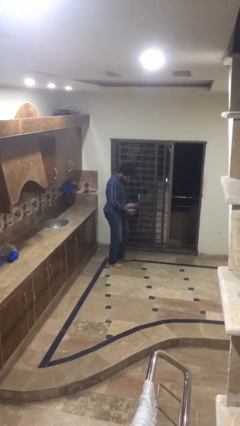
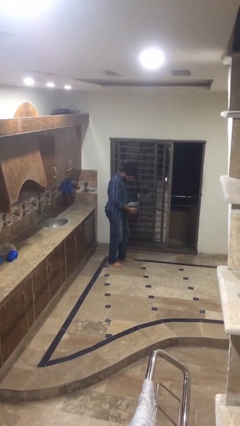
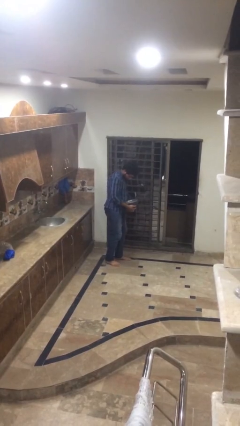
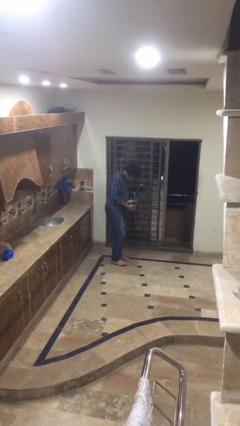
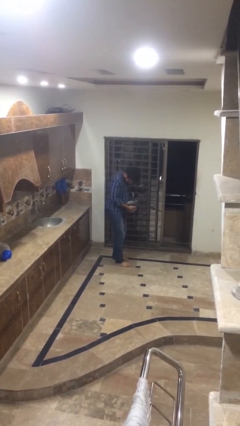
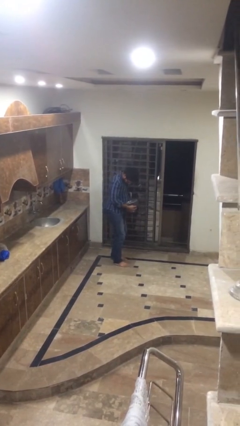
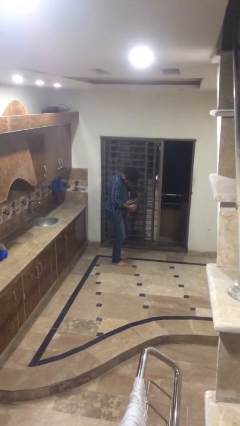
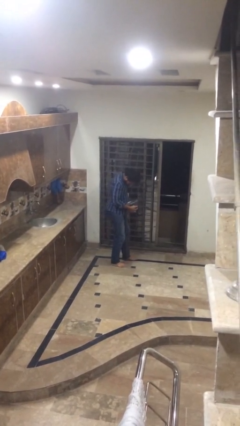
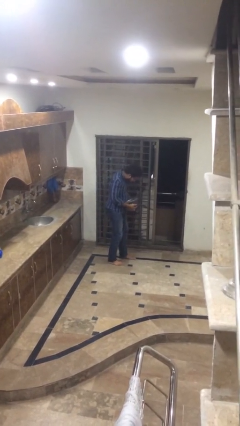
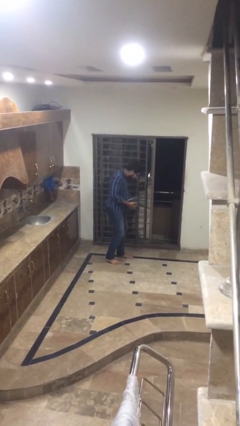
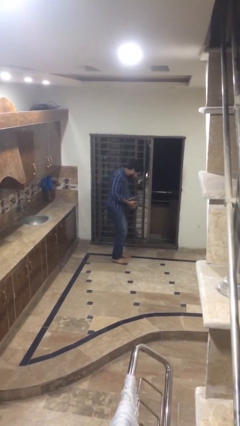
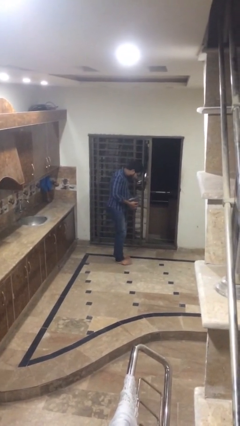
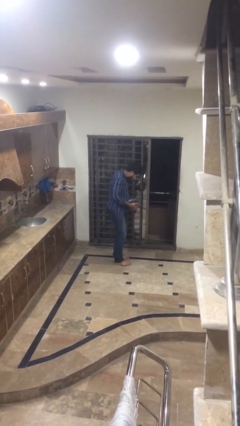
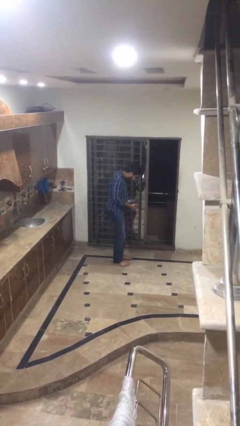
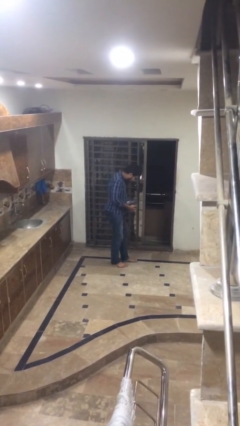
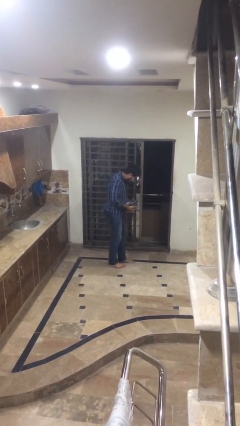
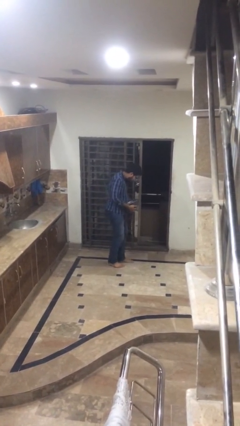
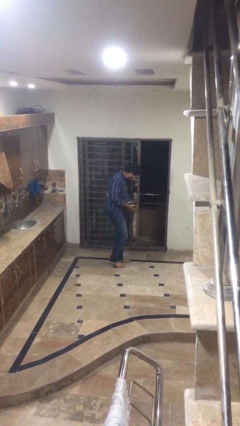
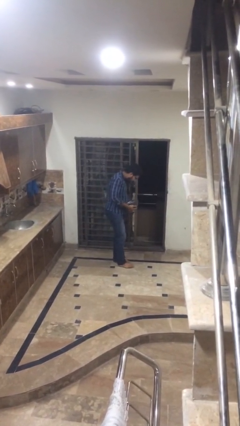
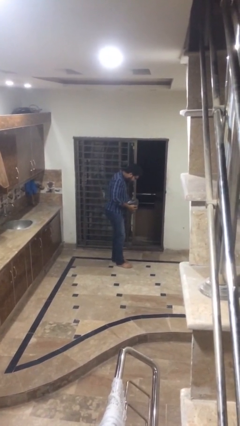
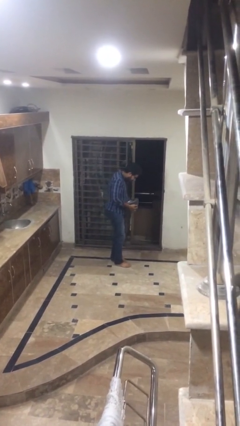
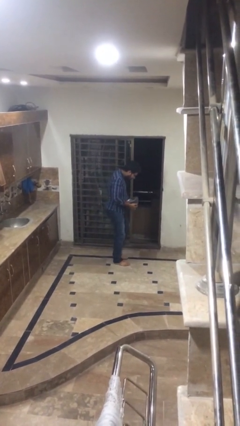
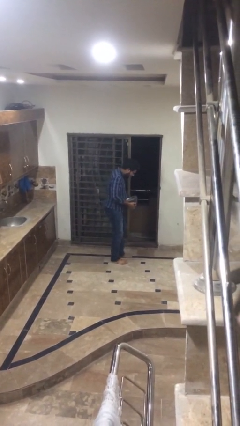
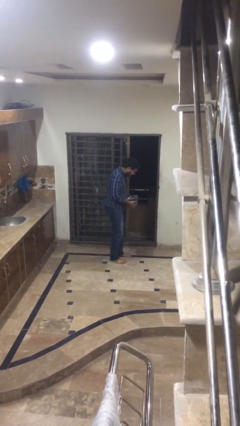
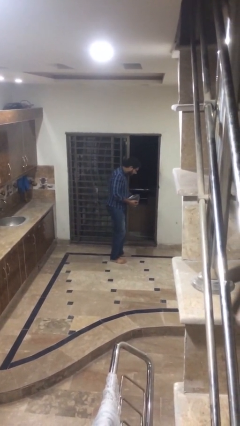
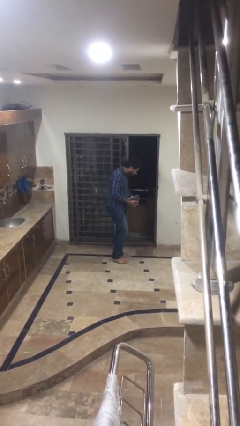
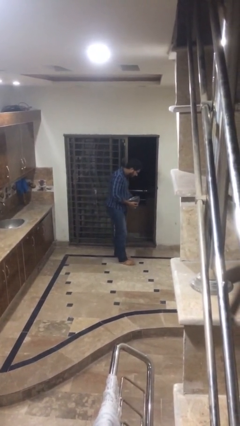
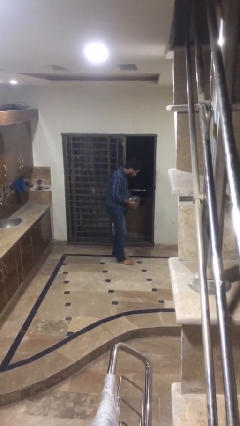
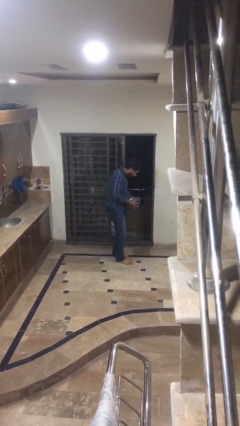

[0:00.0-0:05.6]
person carries heavy object

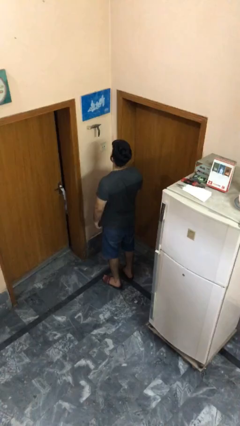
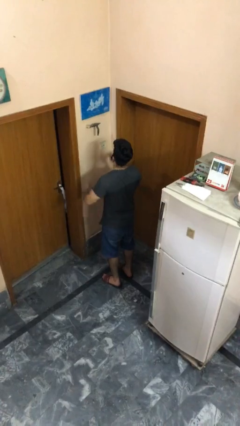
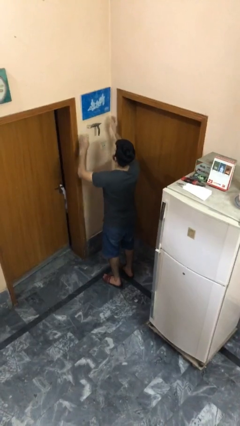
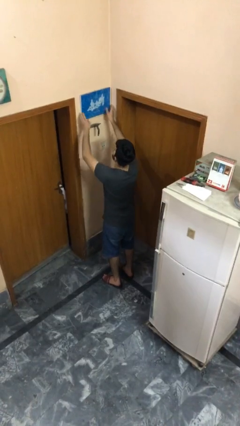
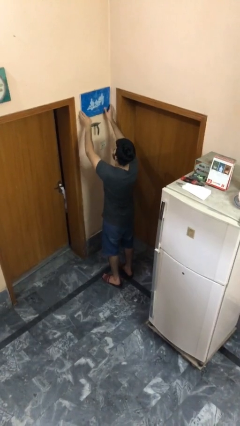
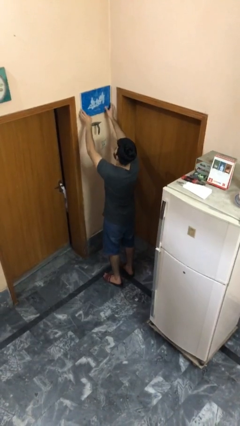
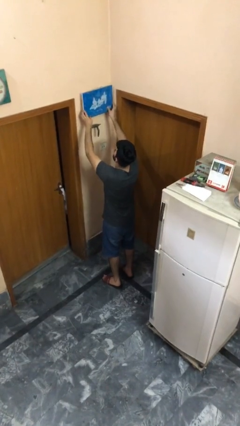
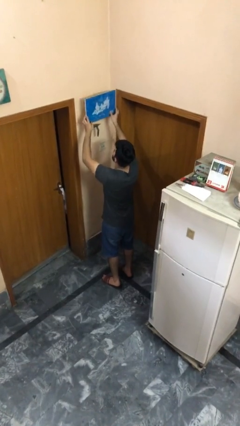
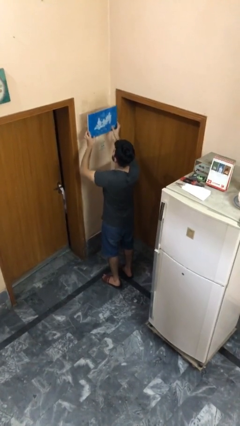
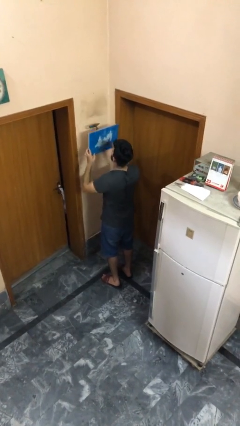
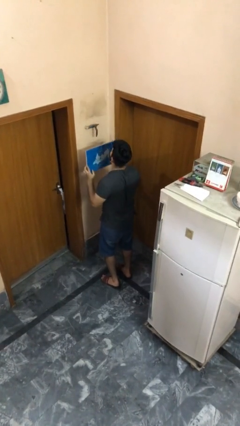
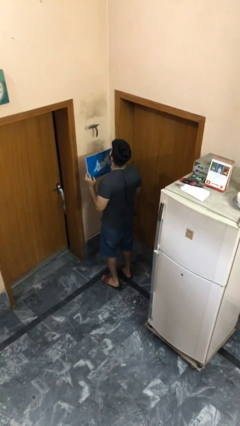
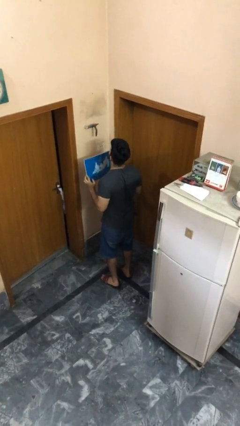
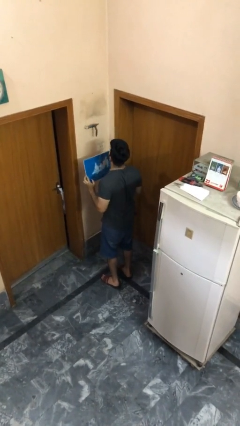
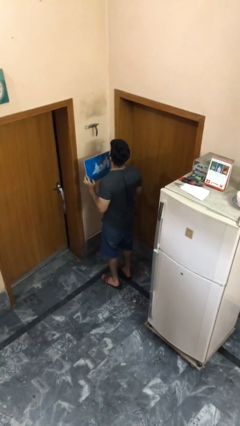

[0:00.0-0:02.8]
person takes down picture frame

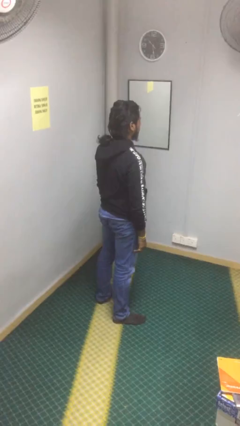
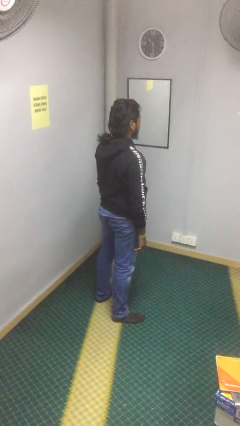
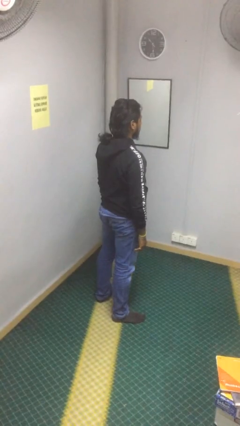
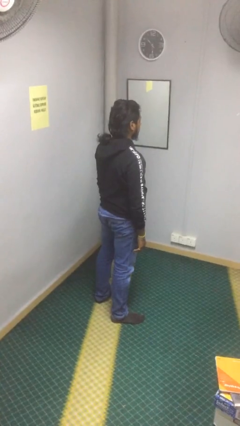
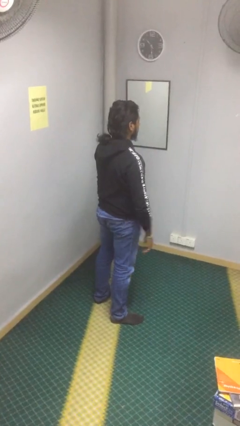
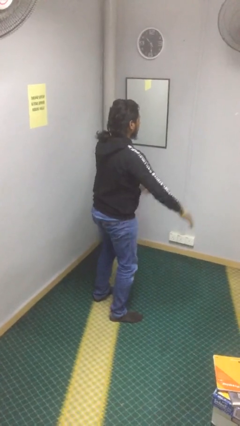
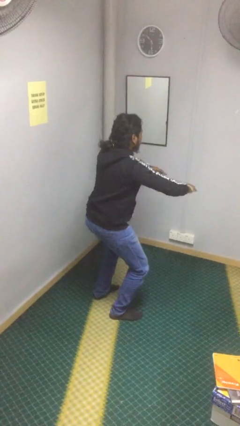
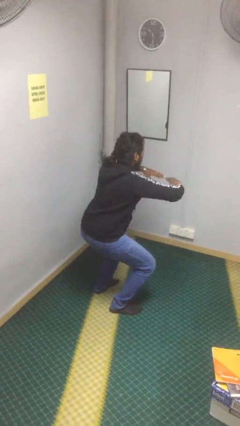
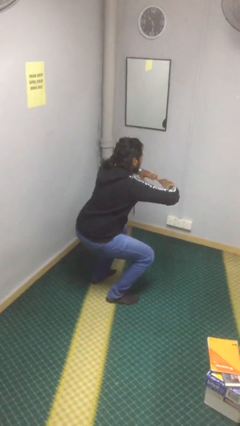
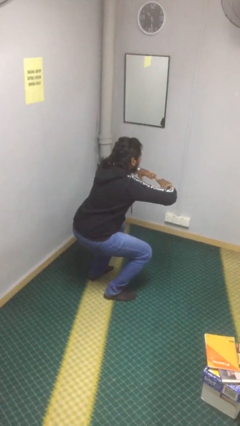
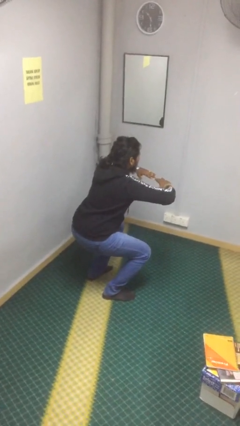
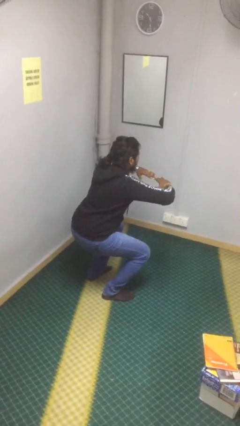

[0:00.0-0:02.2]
person squats

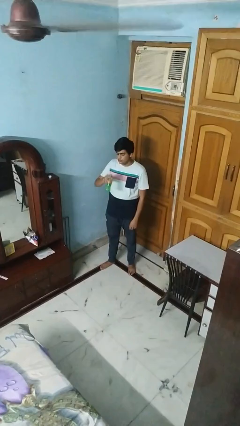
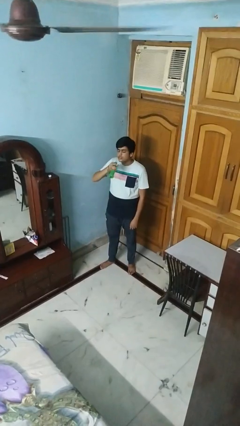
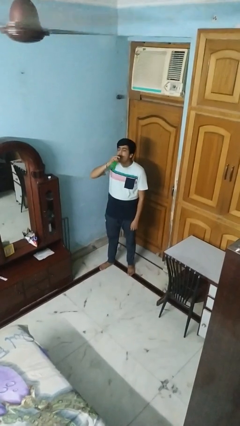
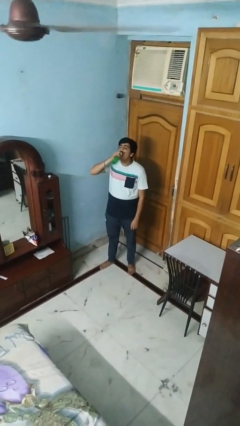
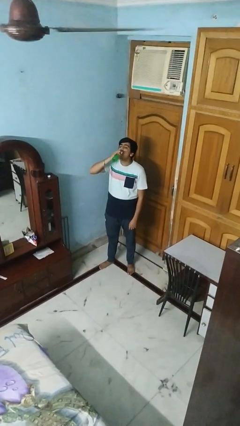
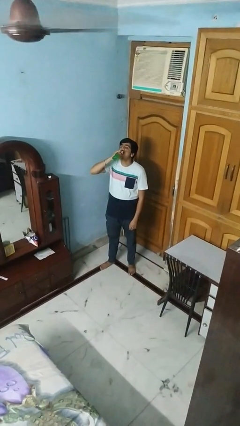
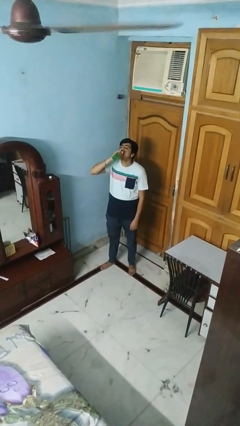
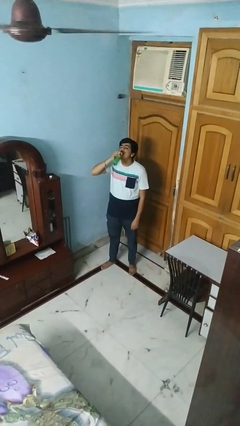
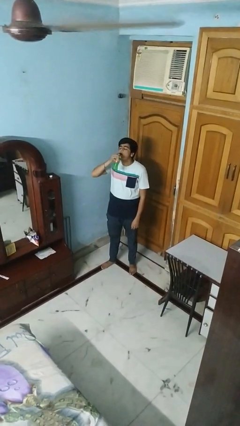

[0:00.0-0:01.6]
person drinks from bottle

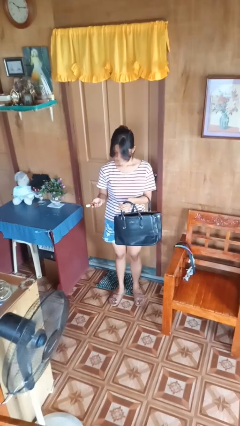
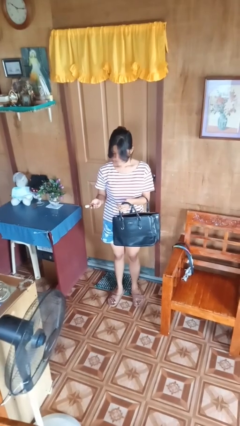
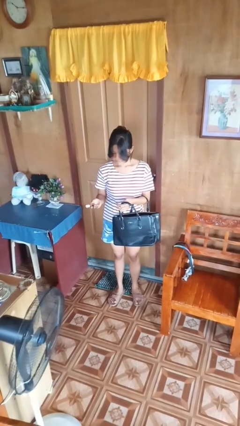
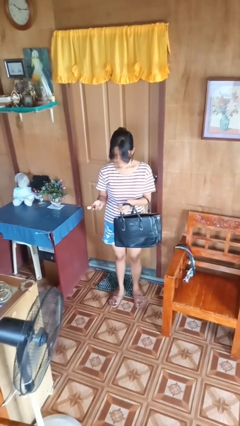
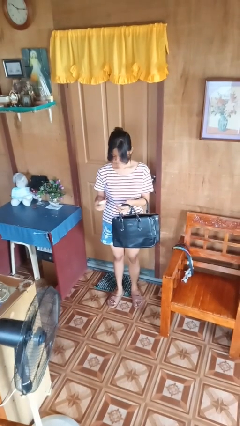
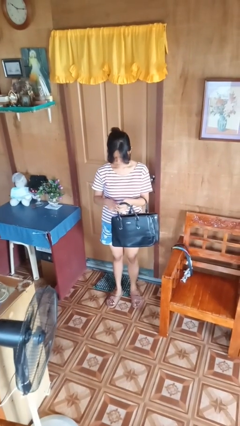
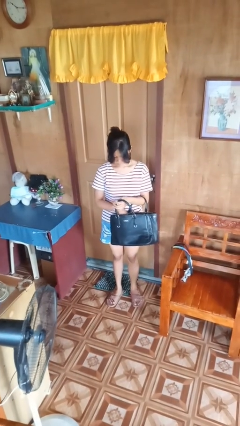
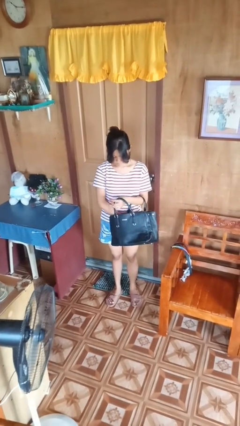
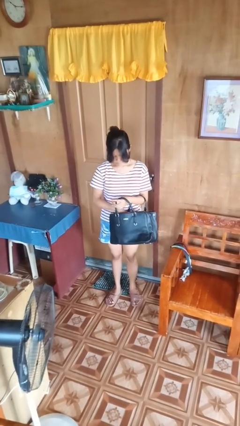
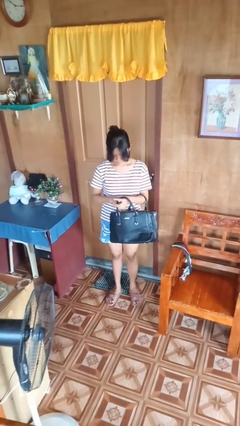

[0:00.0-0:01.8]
person puts object into purse

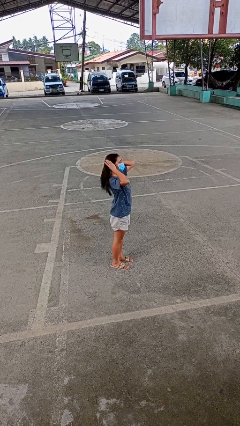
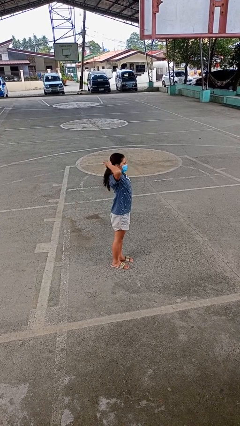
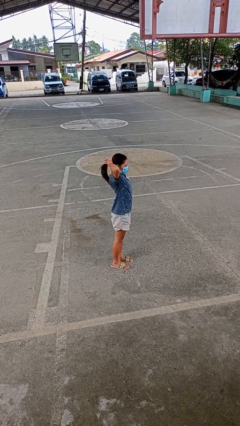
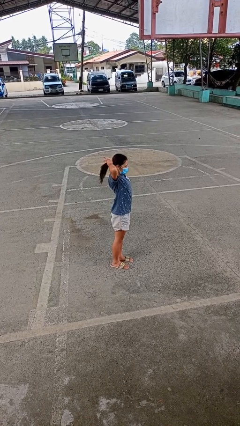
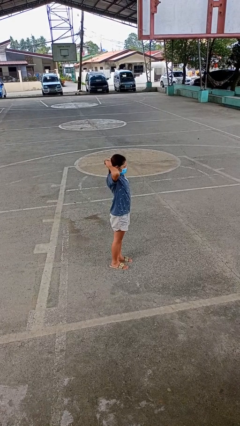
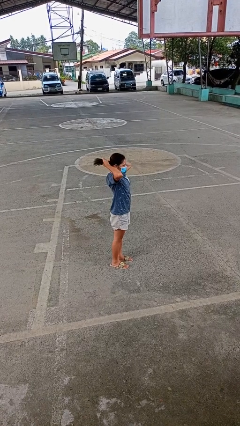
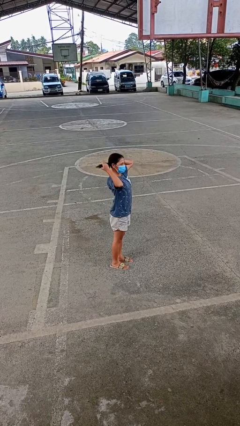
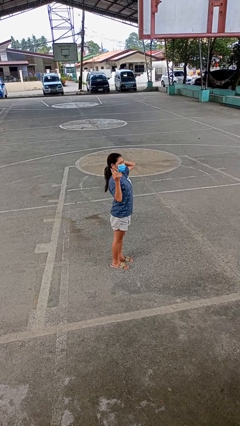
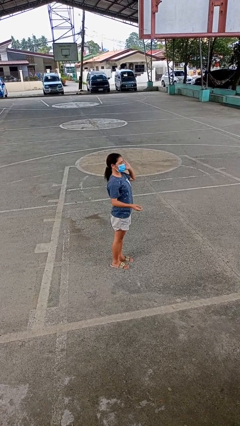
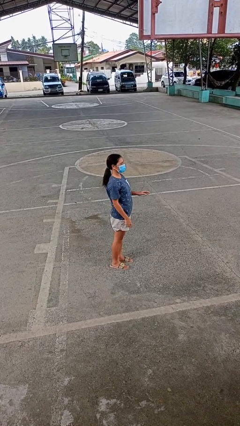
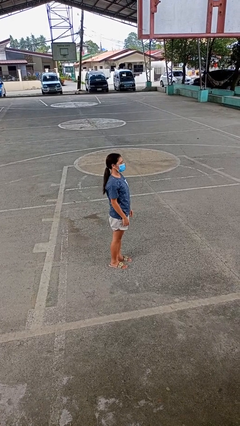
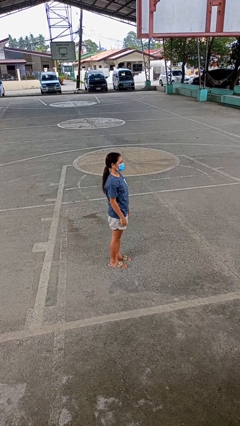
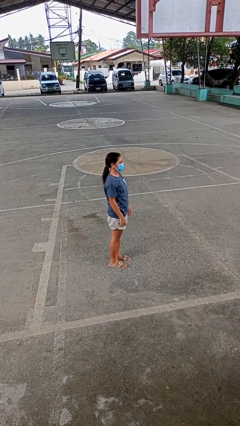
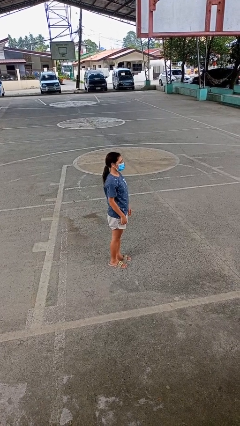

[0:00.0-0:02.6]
person puts hair in ponytail

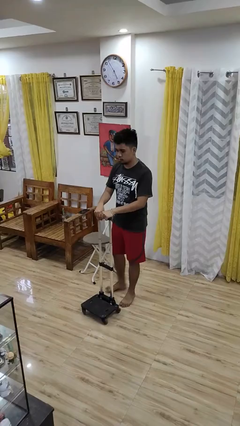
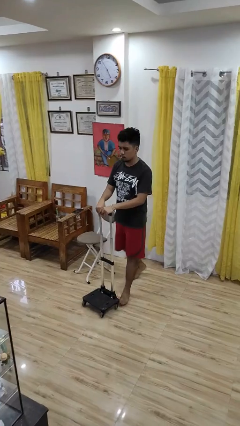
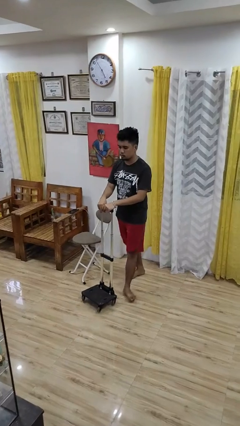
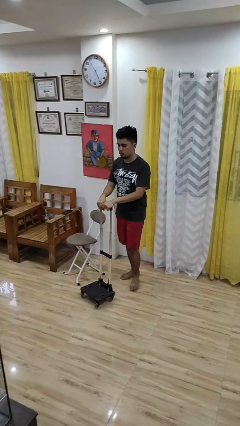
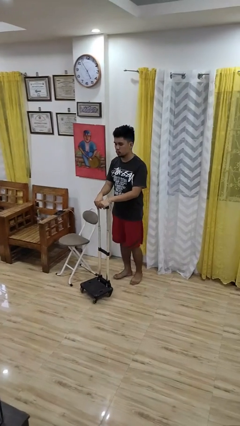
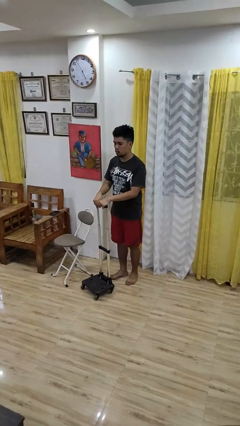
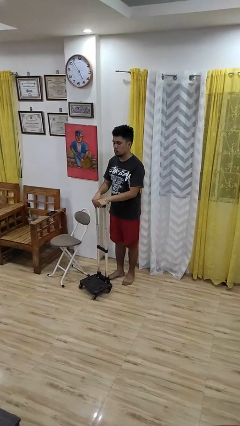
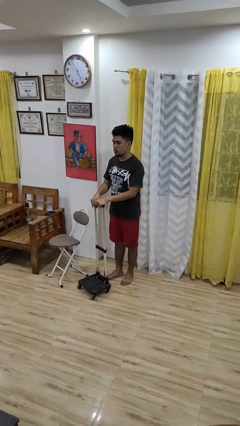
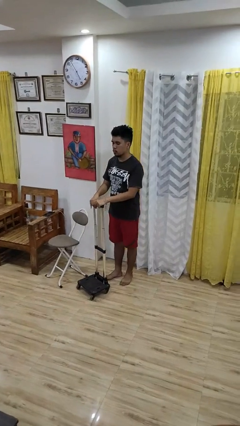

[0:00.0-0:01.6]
person pulls wheeled cart
